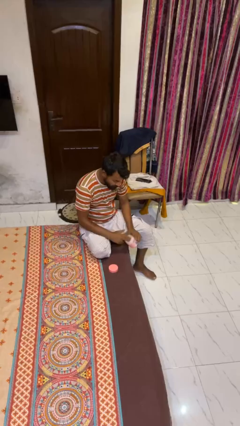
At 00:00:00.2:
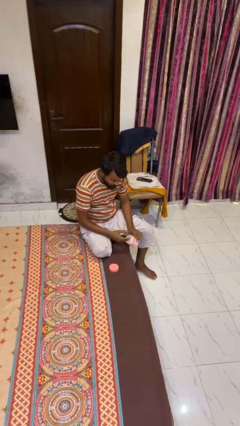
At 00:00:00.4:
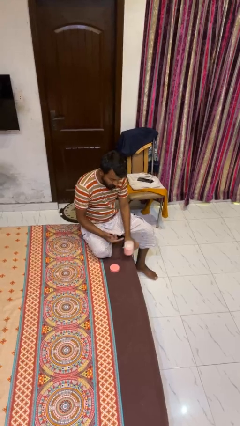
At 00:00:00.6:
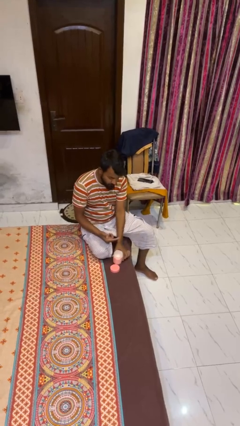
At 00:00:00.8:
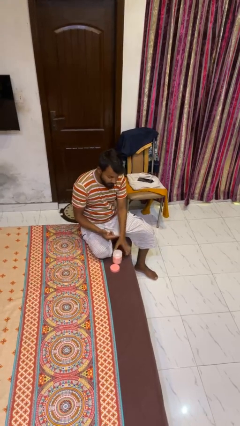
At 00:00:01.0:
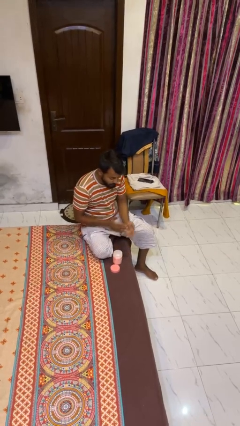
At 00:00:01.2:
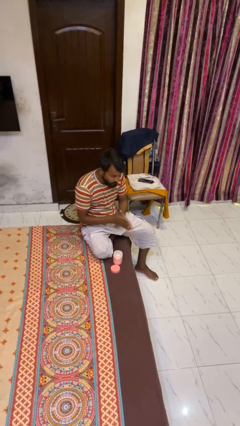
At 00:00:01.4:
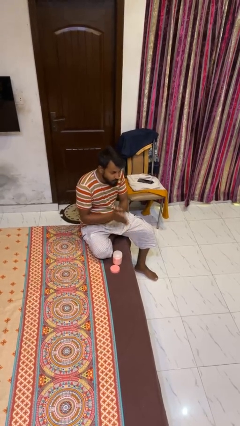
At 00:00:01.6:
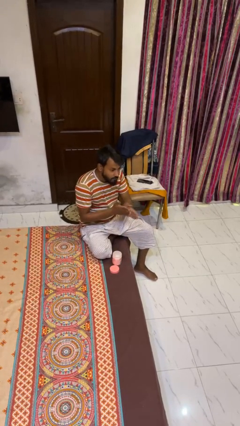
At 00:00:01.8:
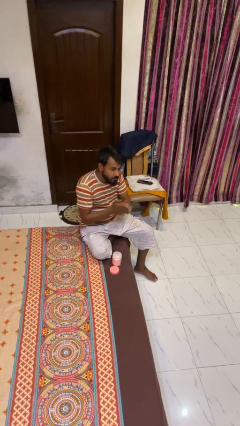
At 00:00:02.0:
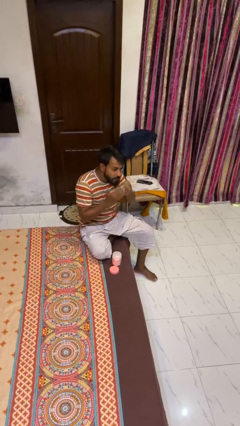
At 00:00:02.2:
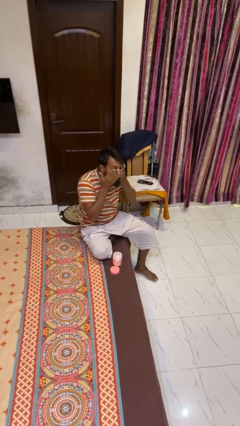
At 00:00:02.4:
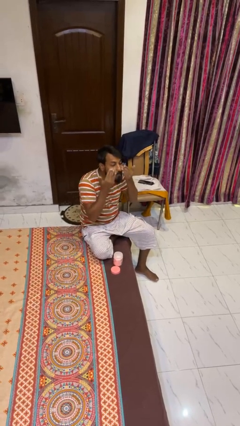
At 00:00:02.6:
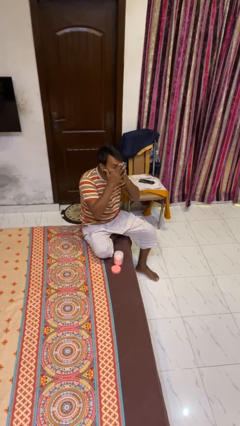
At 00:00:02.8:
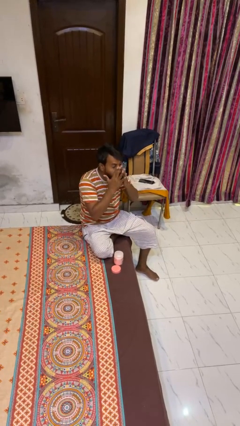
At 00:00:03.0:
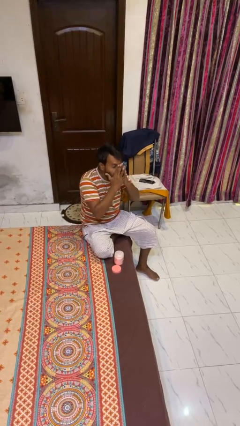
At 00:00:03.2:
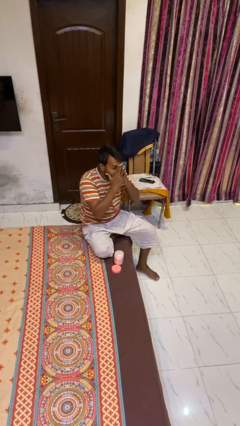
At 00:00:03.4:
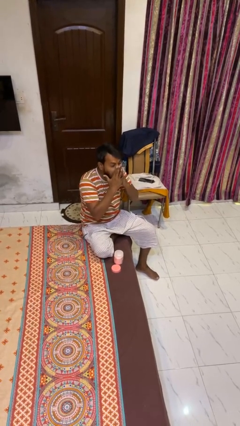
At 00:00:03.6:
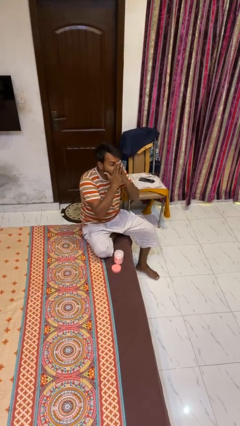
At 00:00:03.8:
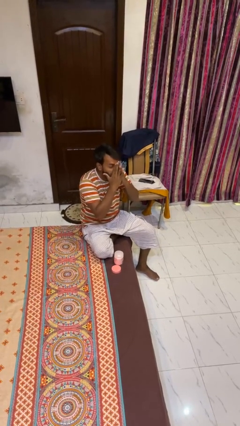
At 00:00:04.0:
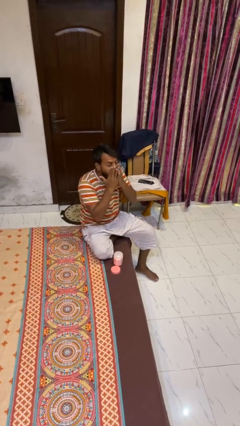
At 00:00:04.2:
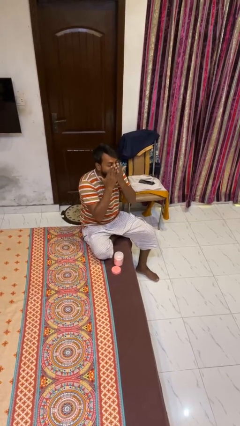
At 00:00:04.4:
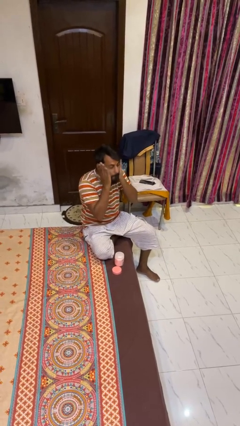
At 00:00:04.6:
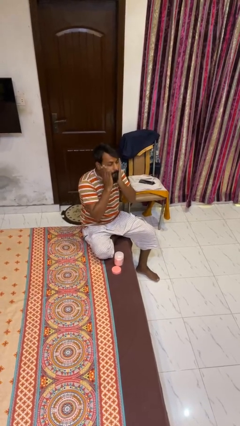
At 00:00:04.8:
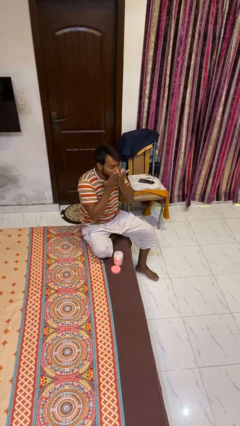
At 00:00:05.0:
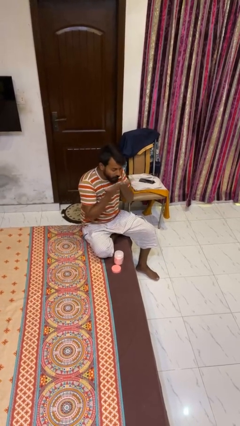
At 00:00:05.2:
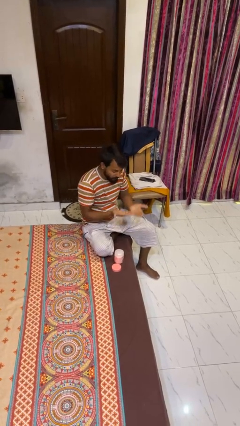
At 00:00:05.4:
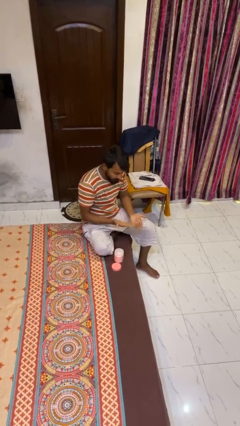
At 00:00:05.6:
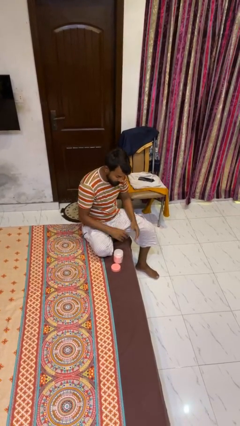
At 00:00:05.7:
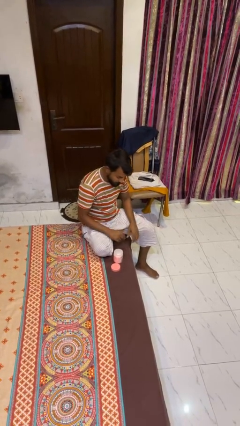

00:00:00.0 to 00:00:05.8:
person applies facial moisturizer

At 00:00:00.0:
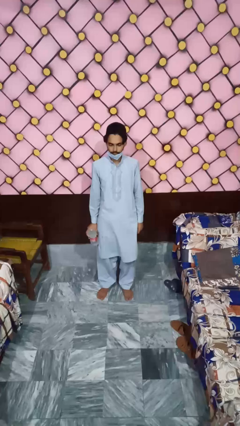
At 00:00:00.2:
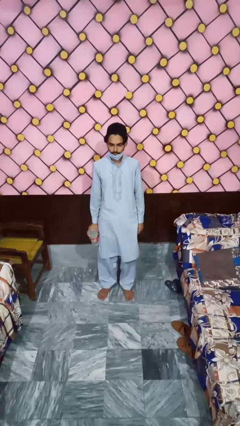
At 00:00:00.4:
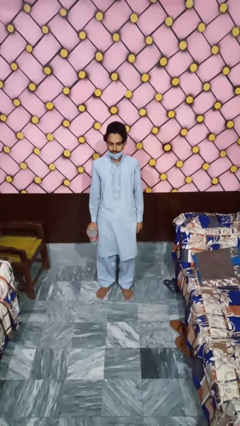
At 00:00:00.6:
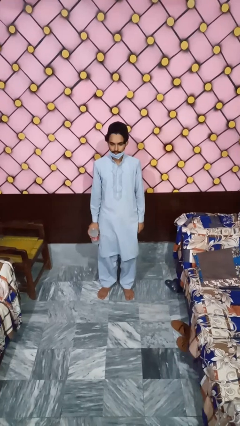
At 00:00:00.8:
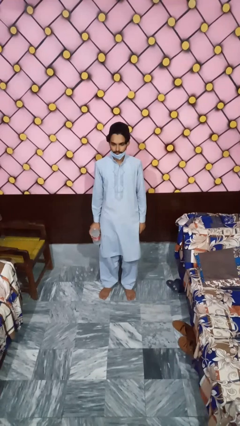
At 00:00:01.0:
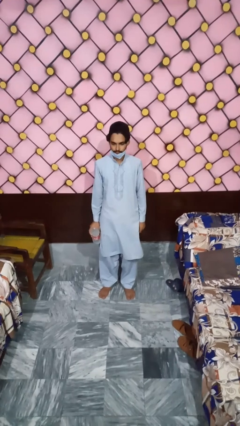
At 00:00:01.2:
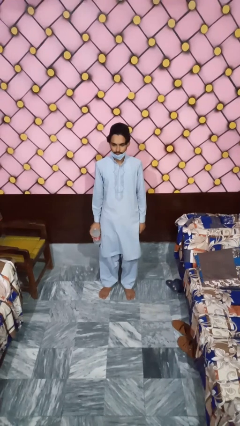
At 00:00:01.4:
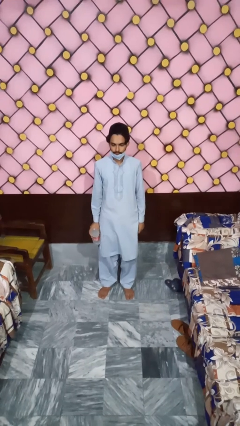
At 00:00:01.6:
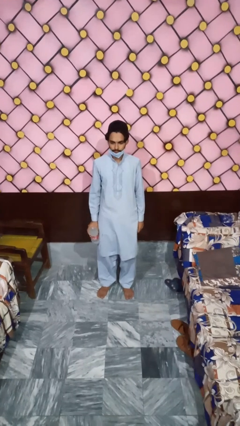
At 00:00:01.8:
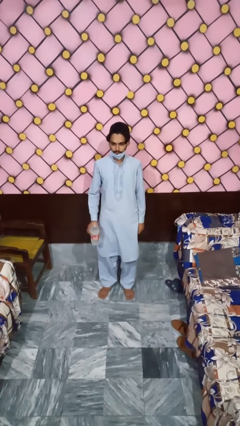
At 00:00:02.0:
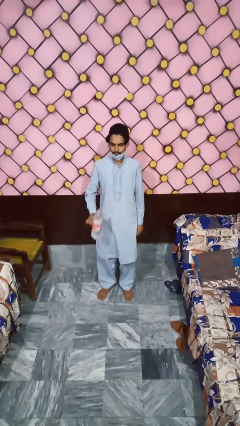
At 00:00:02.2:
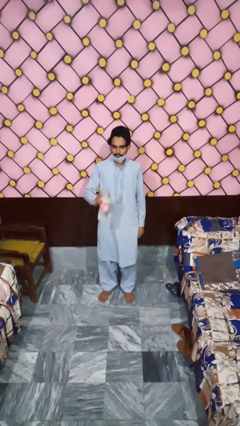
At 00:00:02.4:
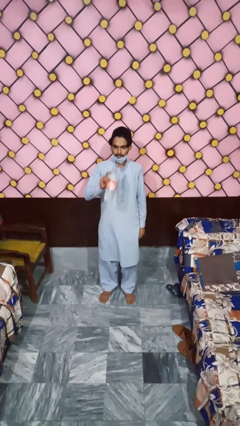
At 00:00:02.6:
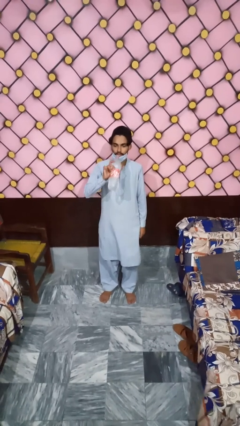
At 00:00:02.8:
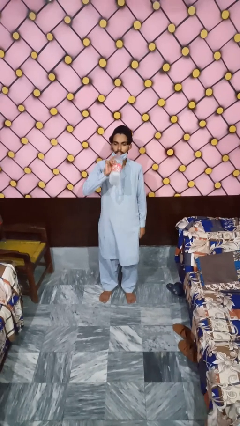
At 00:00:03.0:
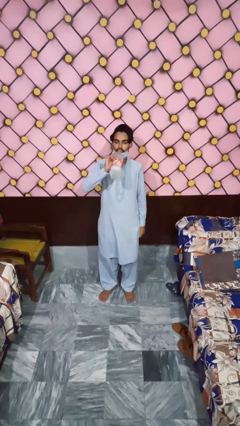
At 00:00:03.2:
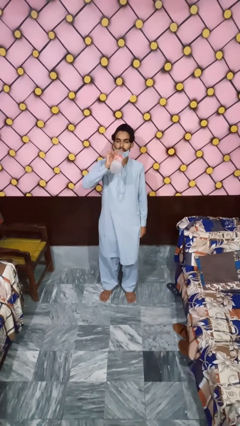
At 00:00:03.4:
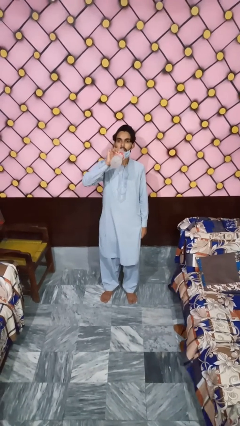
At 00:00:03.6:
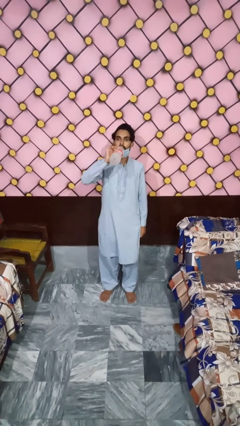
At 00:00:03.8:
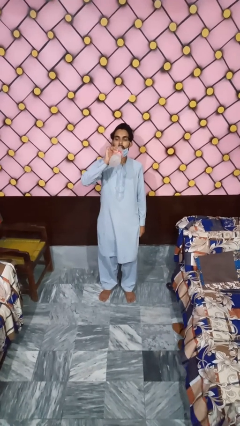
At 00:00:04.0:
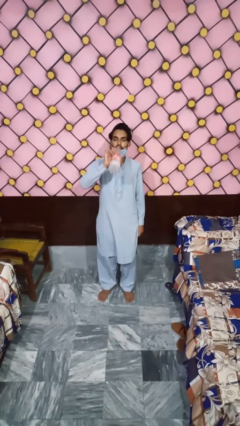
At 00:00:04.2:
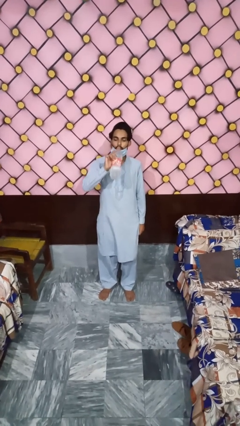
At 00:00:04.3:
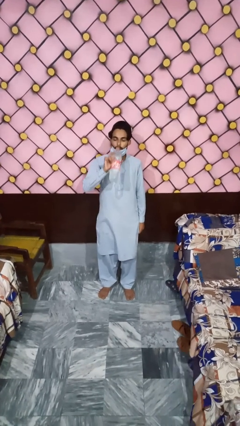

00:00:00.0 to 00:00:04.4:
person drinks from bottle

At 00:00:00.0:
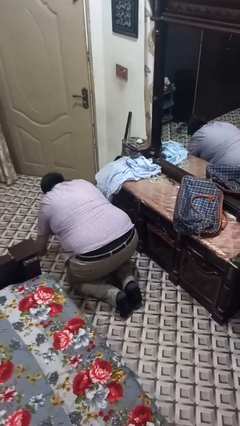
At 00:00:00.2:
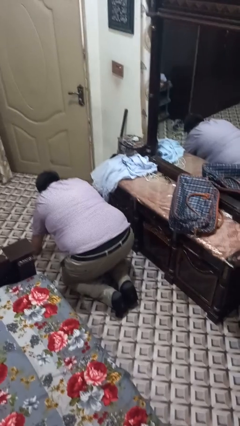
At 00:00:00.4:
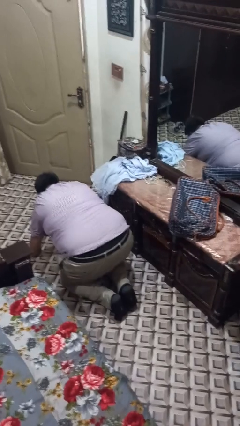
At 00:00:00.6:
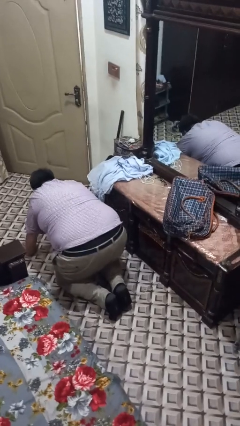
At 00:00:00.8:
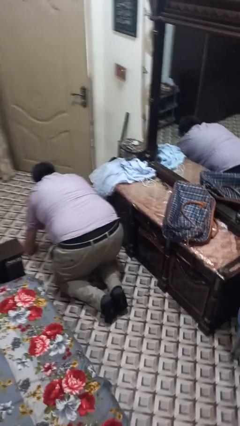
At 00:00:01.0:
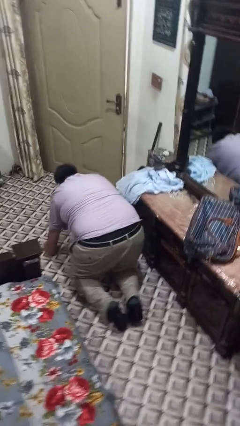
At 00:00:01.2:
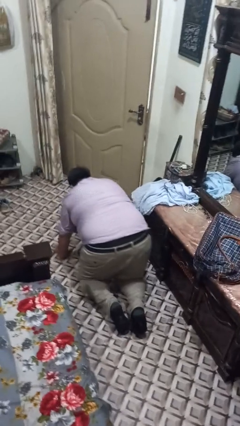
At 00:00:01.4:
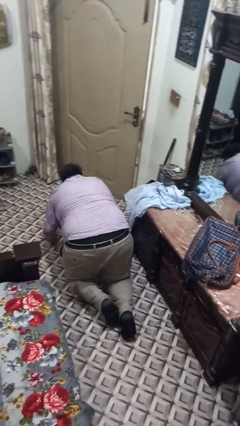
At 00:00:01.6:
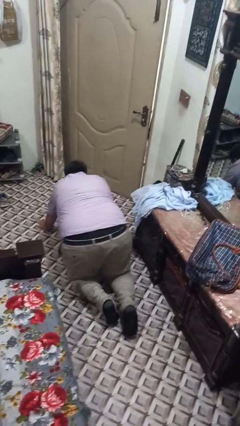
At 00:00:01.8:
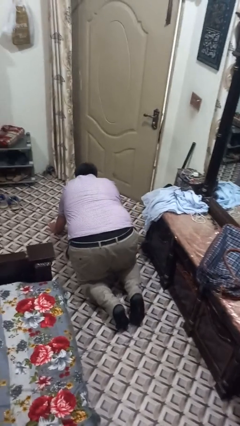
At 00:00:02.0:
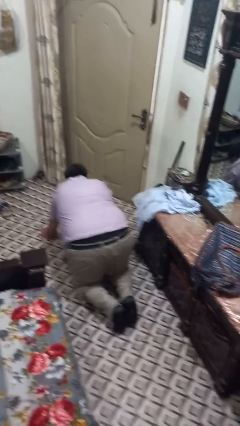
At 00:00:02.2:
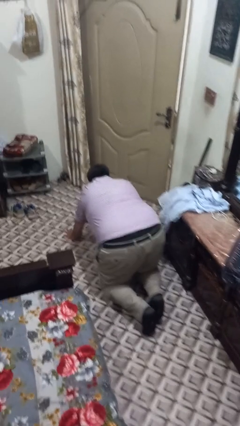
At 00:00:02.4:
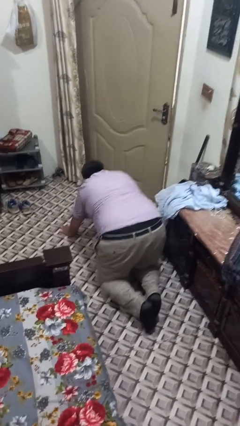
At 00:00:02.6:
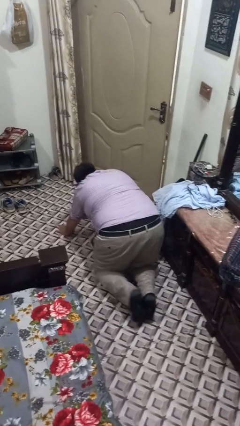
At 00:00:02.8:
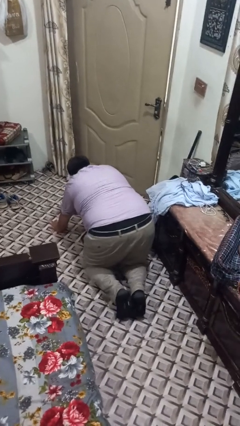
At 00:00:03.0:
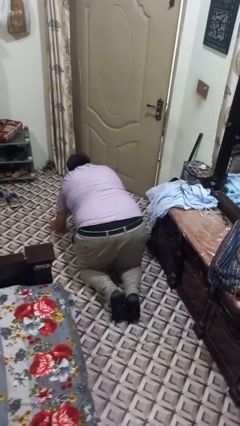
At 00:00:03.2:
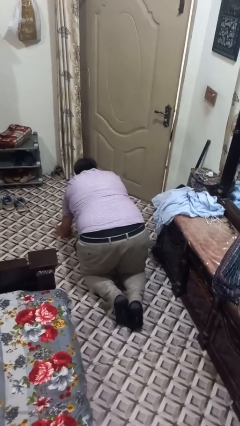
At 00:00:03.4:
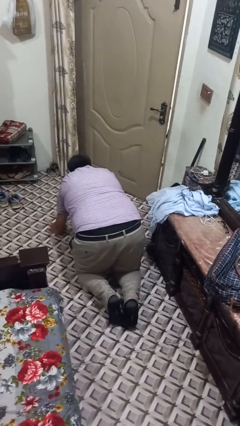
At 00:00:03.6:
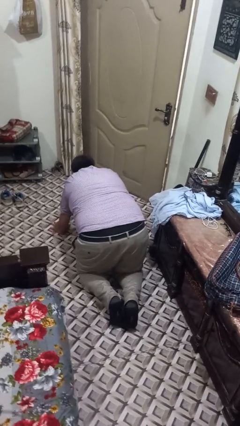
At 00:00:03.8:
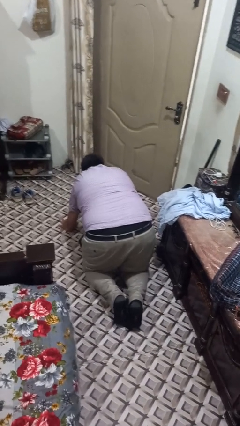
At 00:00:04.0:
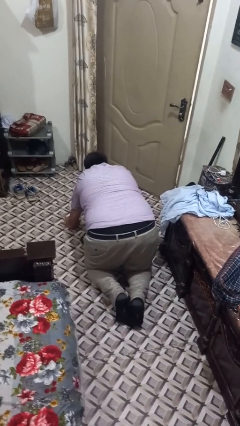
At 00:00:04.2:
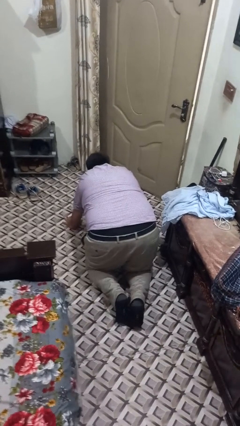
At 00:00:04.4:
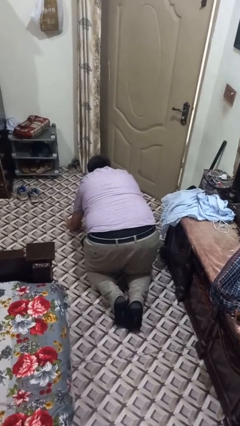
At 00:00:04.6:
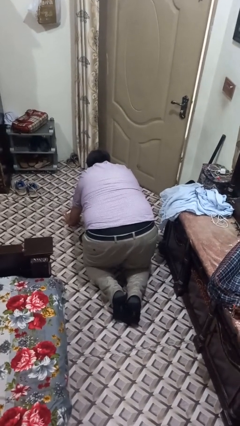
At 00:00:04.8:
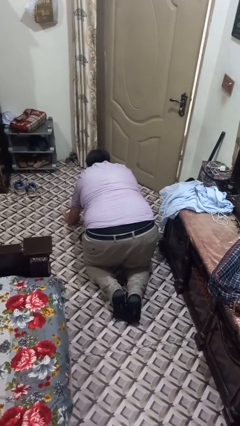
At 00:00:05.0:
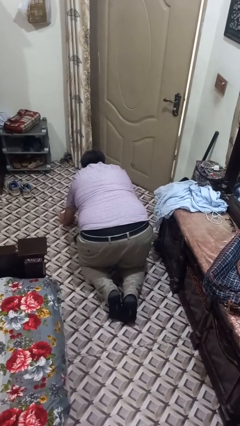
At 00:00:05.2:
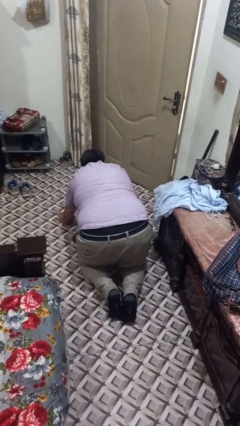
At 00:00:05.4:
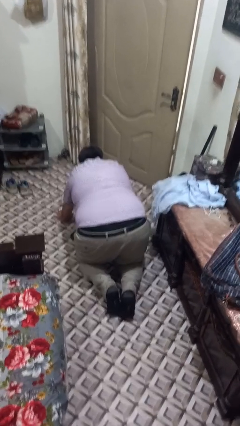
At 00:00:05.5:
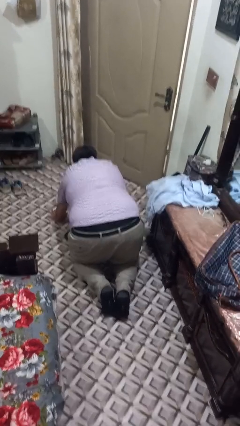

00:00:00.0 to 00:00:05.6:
person crawls

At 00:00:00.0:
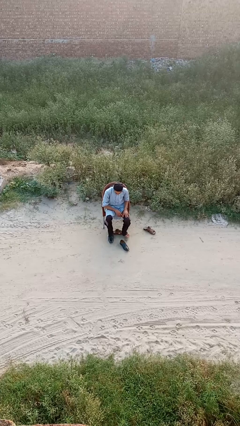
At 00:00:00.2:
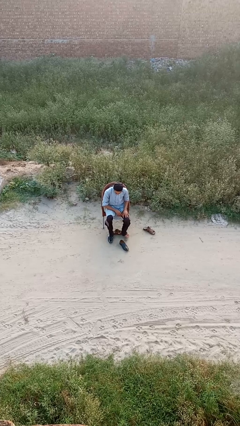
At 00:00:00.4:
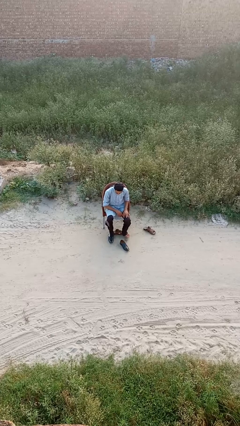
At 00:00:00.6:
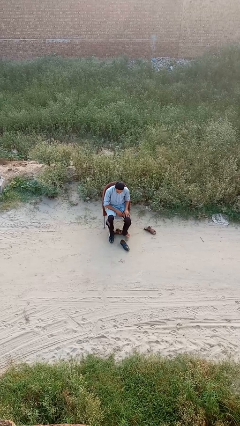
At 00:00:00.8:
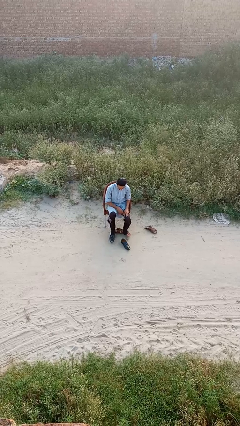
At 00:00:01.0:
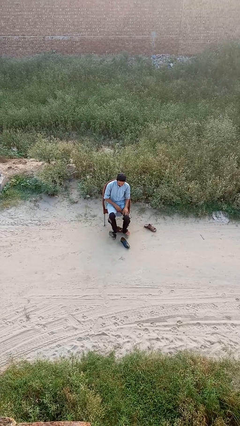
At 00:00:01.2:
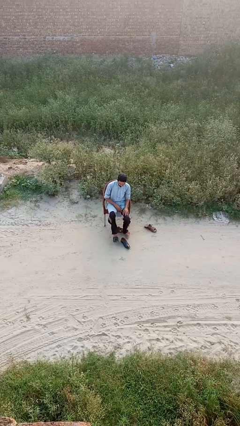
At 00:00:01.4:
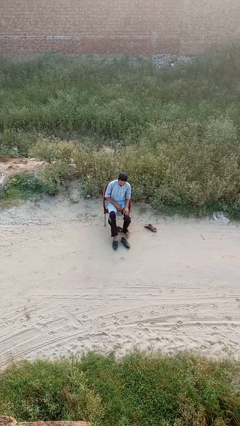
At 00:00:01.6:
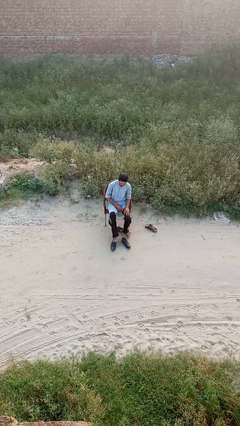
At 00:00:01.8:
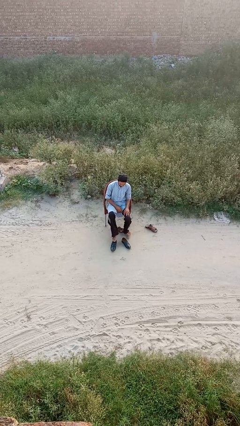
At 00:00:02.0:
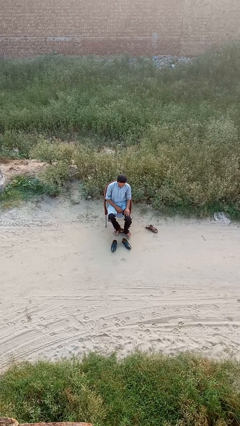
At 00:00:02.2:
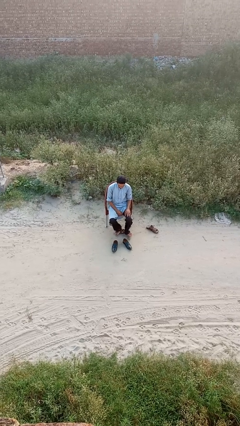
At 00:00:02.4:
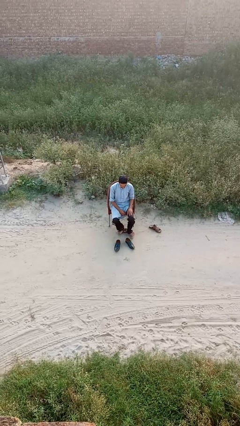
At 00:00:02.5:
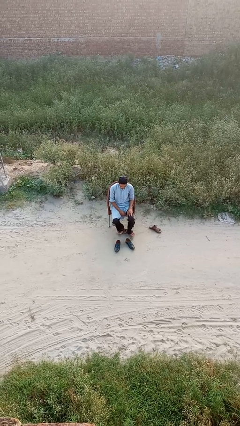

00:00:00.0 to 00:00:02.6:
person takes off shoes
